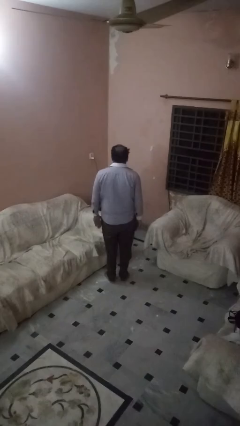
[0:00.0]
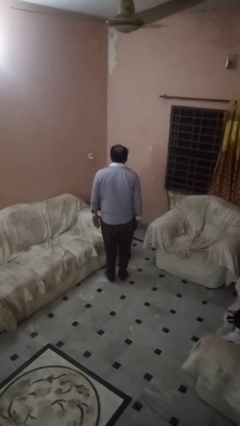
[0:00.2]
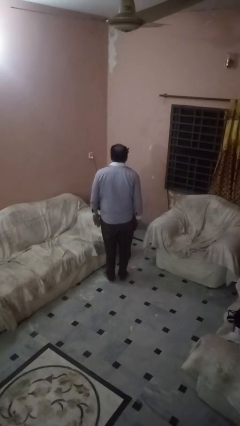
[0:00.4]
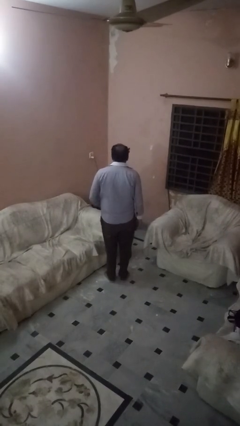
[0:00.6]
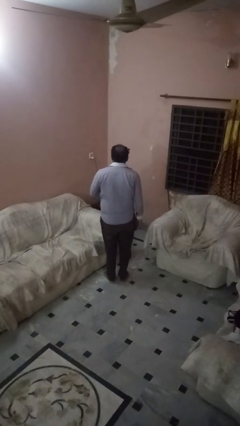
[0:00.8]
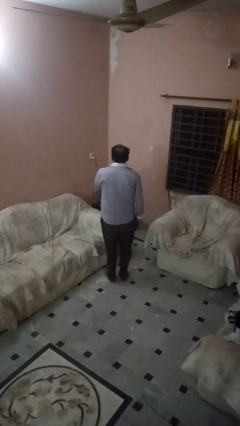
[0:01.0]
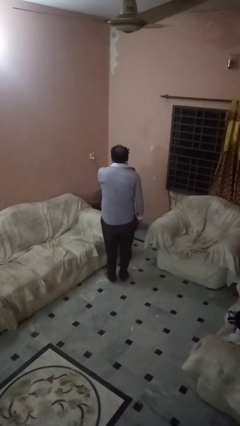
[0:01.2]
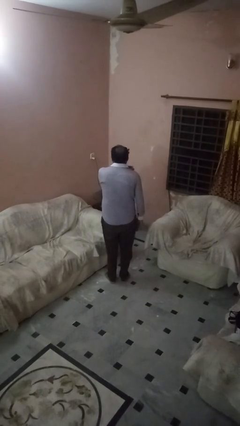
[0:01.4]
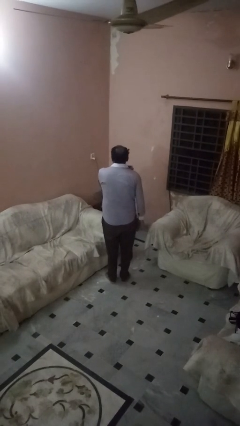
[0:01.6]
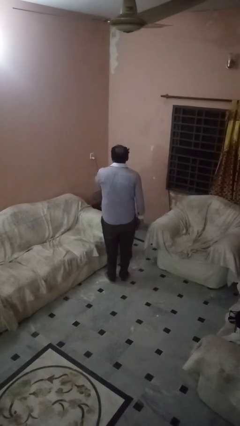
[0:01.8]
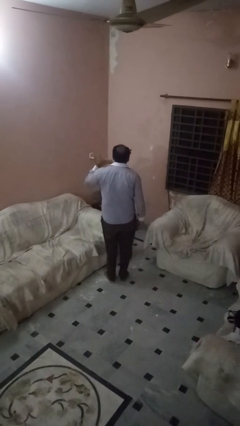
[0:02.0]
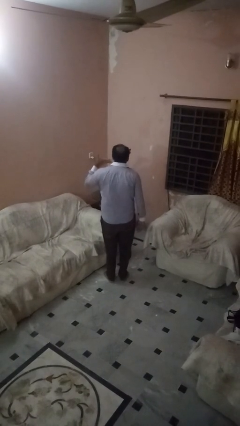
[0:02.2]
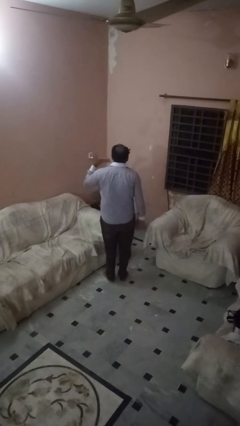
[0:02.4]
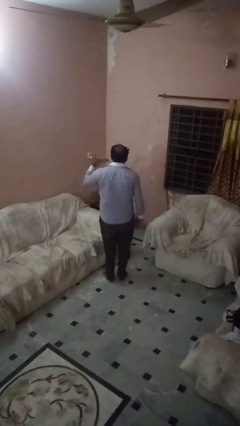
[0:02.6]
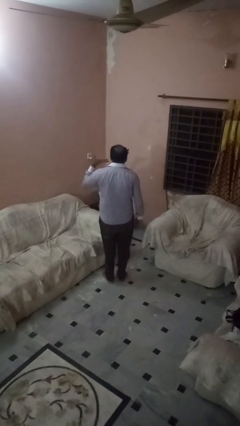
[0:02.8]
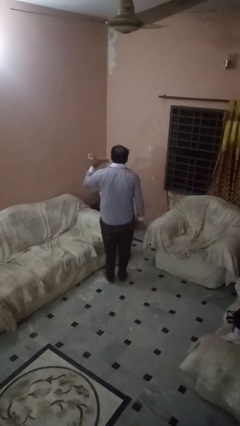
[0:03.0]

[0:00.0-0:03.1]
person gestures cut

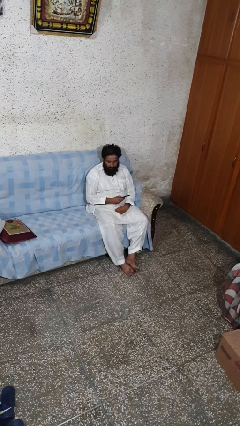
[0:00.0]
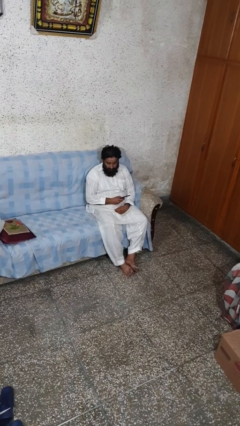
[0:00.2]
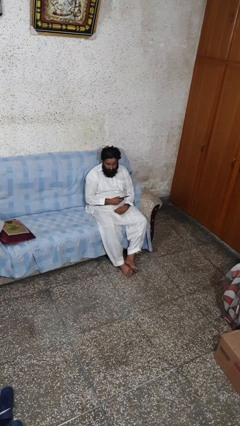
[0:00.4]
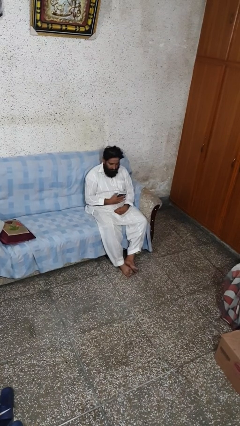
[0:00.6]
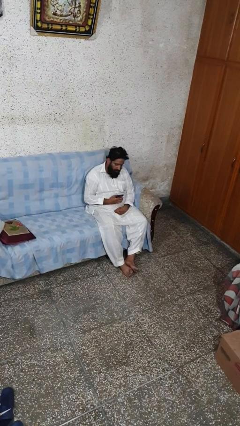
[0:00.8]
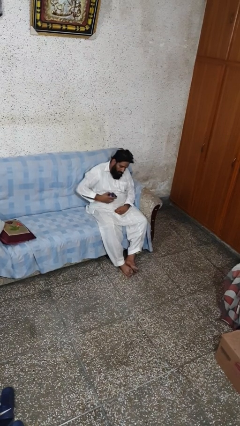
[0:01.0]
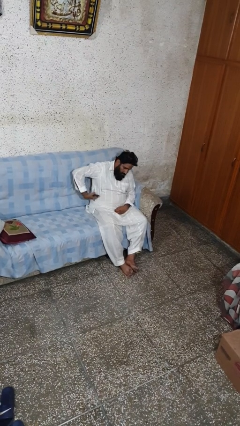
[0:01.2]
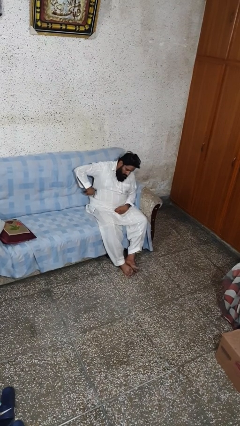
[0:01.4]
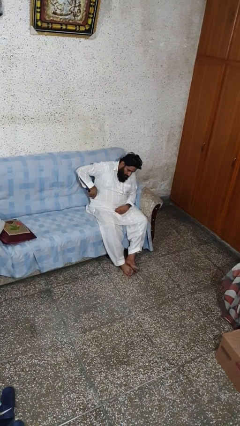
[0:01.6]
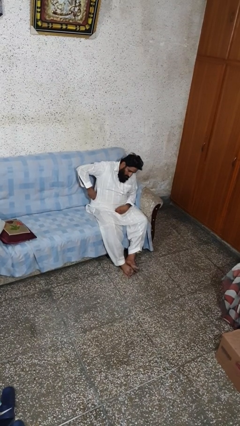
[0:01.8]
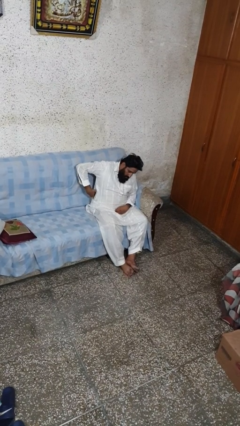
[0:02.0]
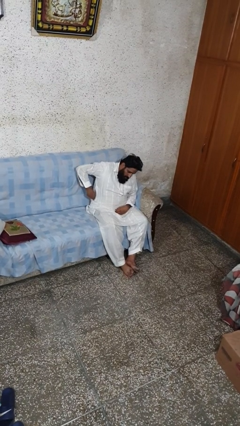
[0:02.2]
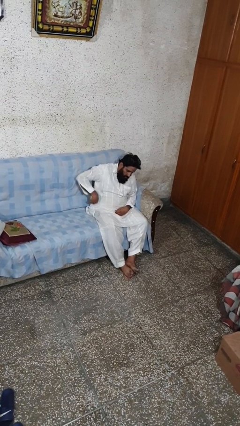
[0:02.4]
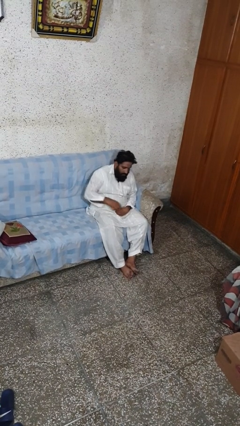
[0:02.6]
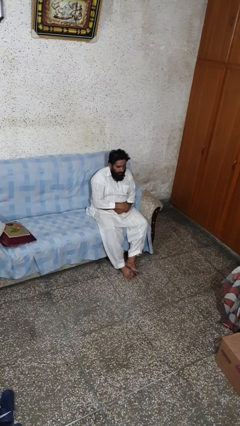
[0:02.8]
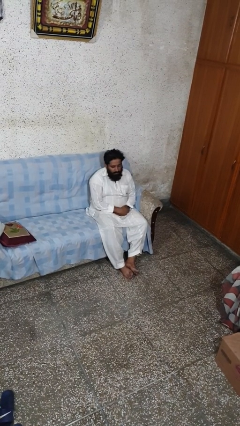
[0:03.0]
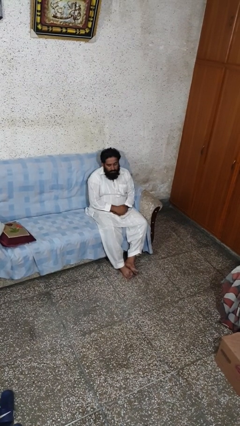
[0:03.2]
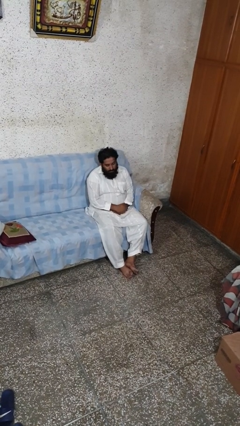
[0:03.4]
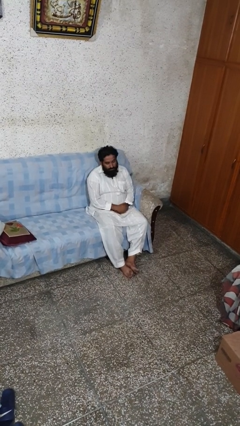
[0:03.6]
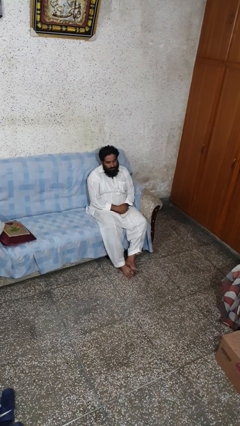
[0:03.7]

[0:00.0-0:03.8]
person puts phone into pocket

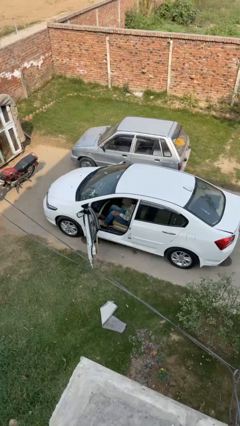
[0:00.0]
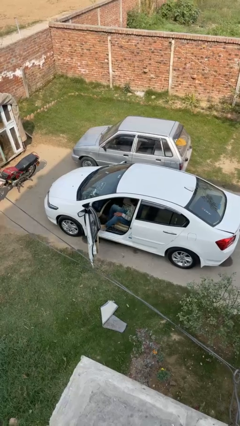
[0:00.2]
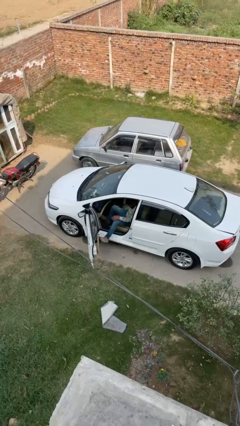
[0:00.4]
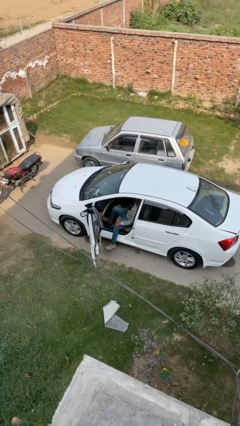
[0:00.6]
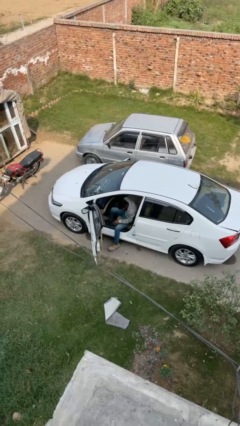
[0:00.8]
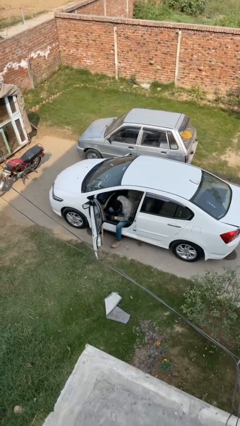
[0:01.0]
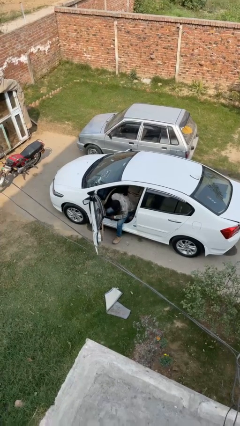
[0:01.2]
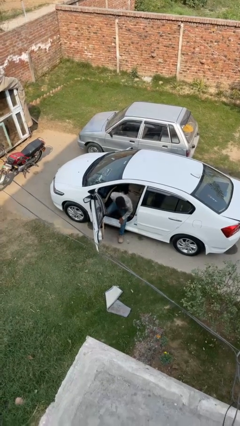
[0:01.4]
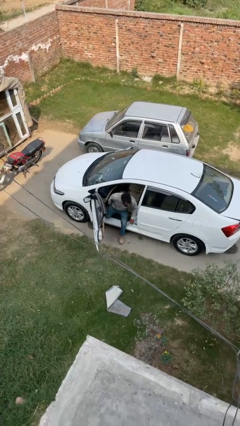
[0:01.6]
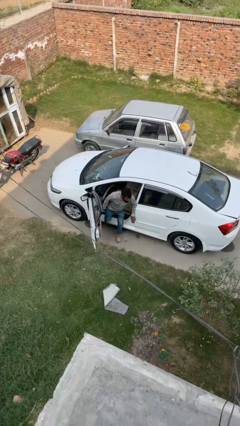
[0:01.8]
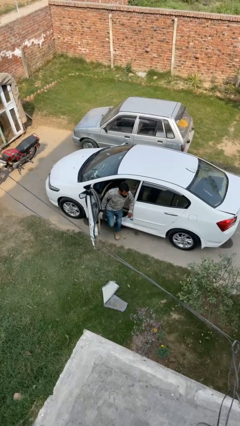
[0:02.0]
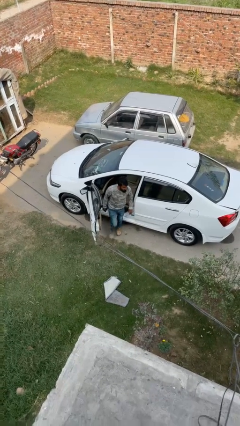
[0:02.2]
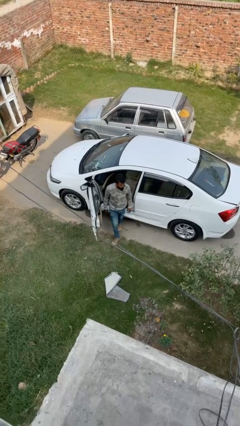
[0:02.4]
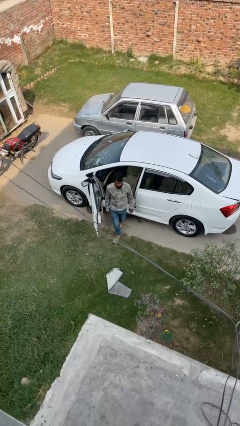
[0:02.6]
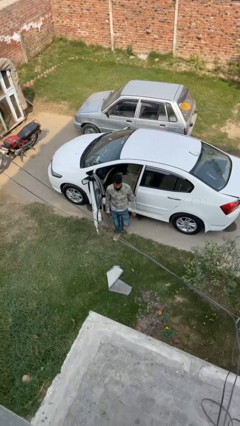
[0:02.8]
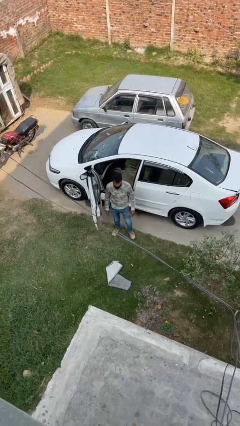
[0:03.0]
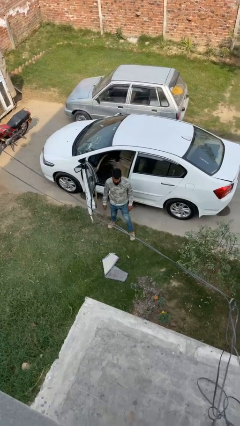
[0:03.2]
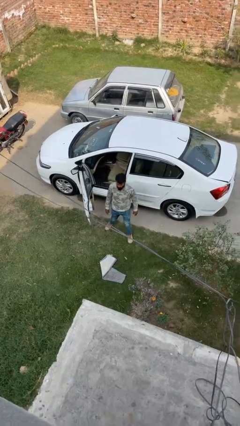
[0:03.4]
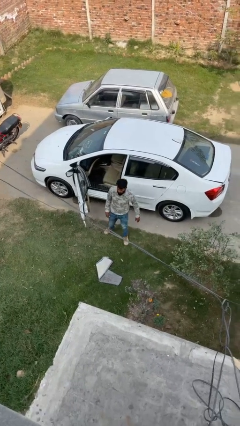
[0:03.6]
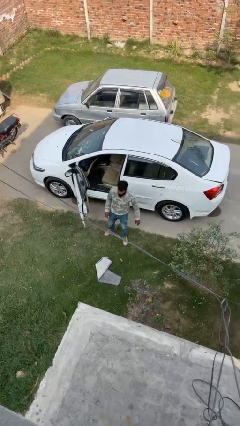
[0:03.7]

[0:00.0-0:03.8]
person exits car

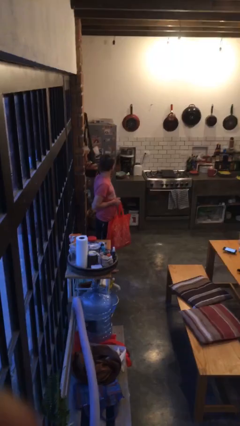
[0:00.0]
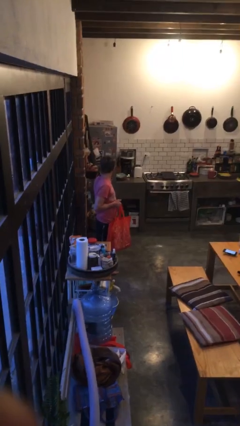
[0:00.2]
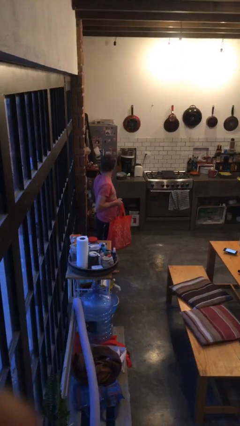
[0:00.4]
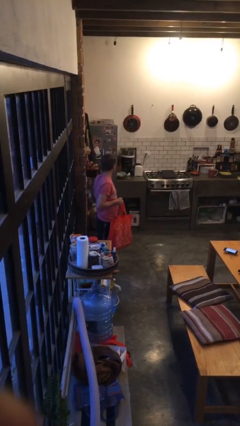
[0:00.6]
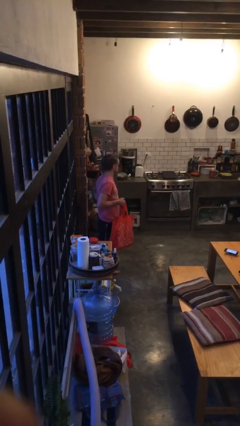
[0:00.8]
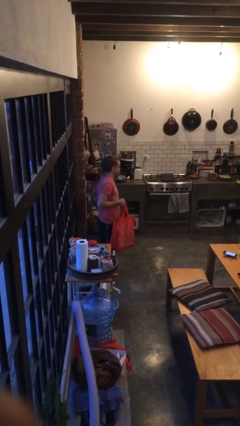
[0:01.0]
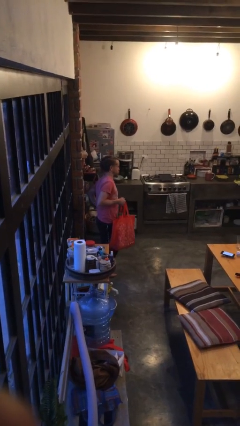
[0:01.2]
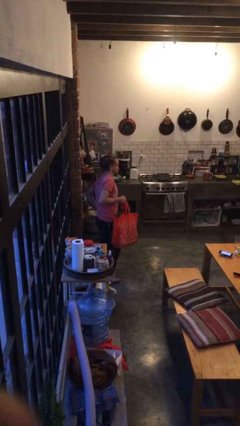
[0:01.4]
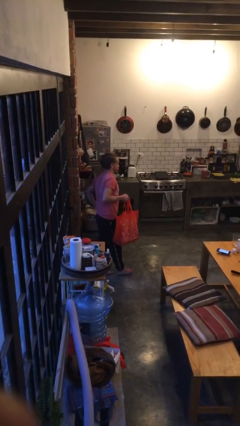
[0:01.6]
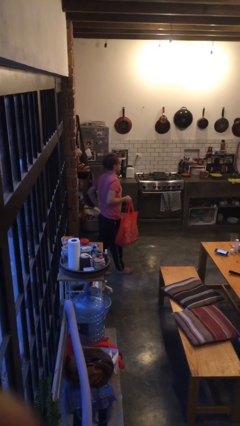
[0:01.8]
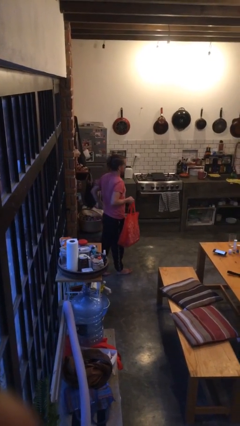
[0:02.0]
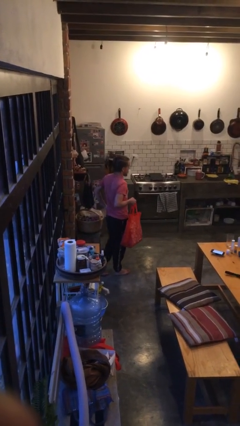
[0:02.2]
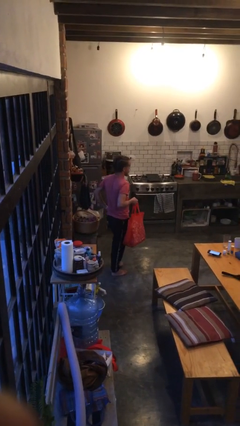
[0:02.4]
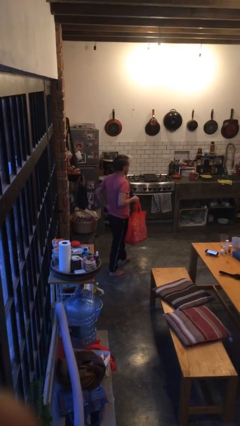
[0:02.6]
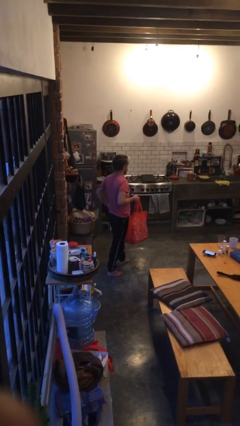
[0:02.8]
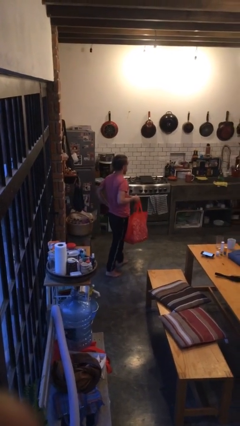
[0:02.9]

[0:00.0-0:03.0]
person carries groceries

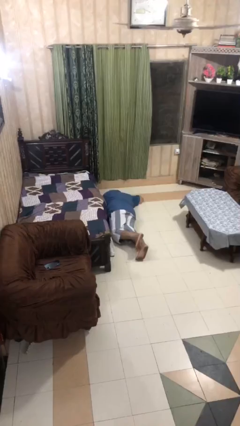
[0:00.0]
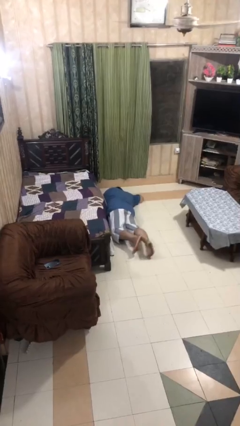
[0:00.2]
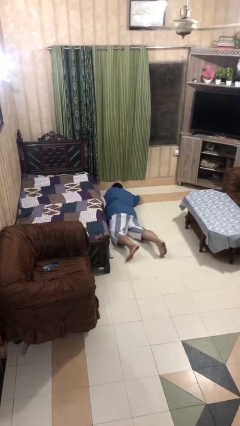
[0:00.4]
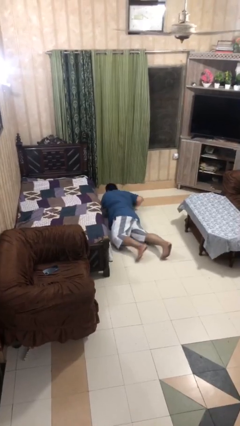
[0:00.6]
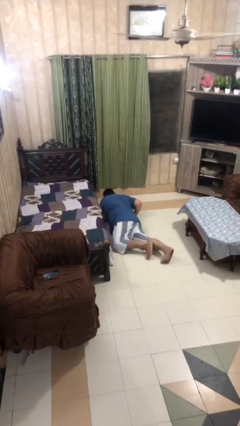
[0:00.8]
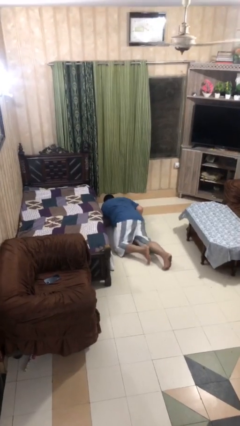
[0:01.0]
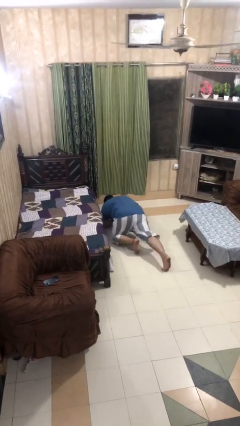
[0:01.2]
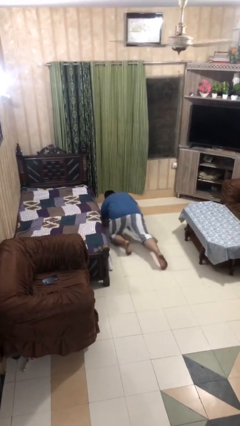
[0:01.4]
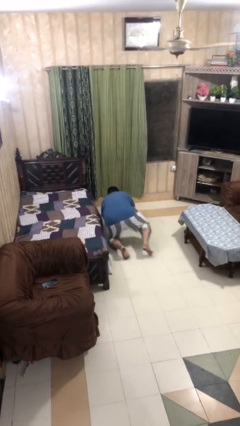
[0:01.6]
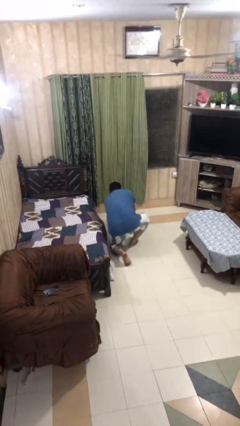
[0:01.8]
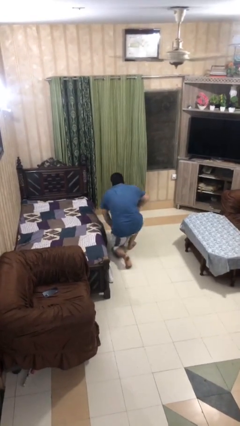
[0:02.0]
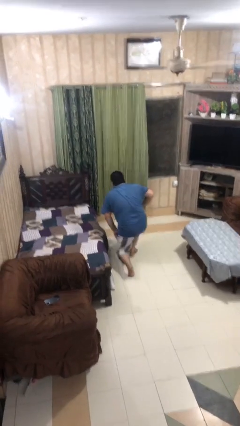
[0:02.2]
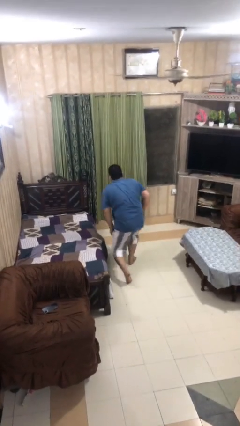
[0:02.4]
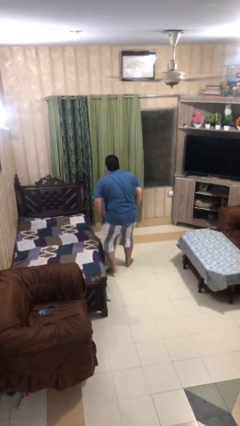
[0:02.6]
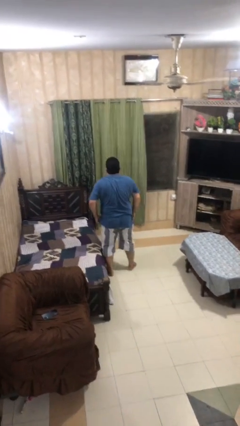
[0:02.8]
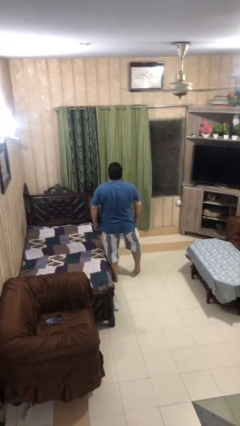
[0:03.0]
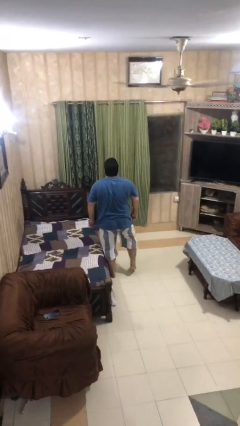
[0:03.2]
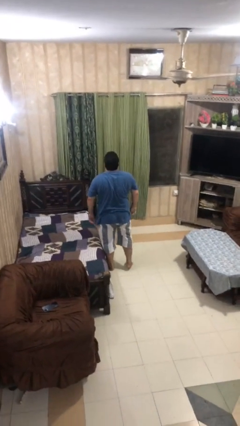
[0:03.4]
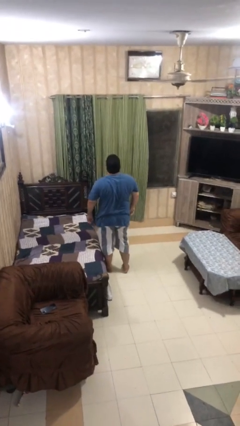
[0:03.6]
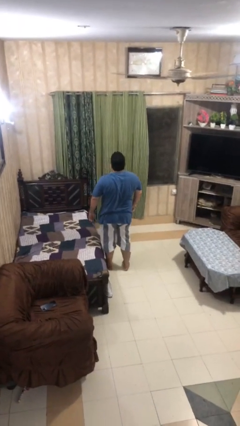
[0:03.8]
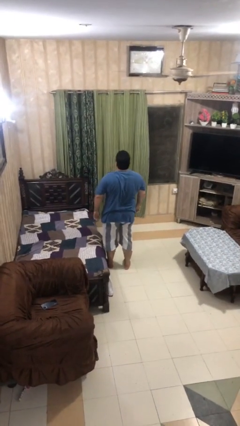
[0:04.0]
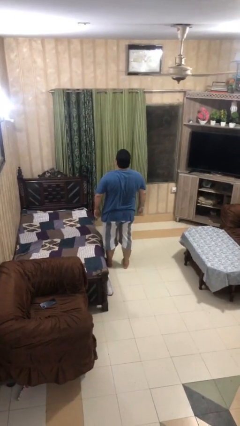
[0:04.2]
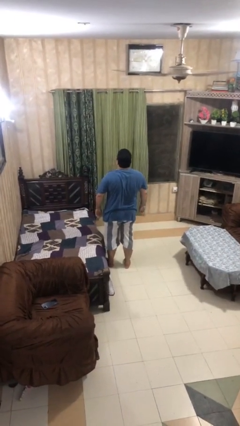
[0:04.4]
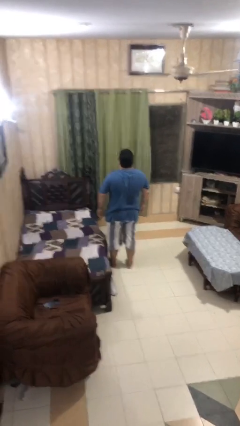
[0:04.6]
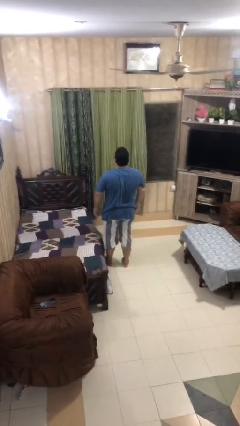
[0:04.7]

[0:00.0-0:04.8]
person stands up from floor
